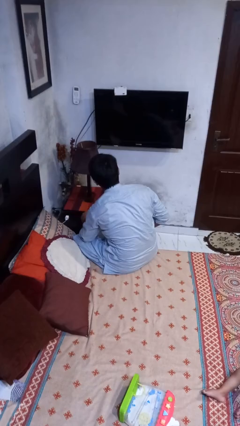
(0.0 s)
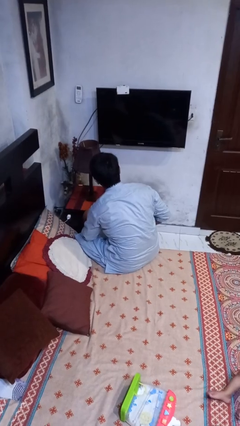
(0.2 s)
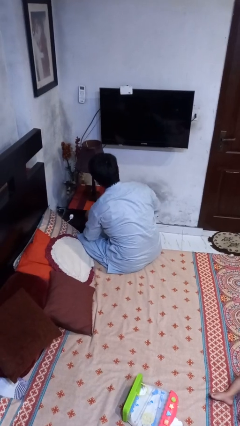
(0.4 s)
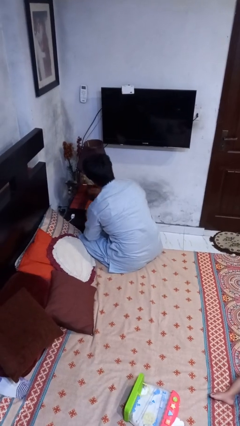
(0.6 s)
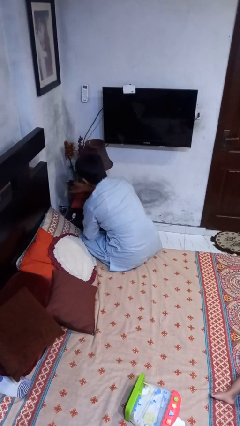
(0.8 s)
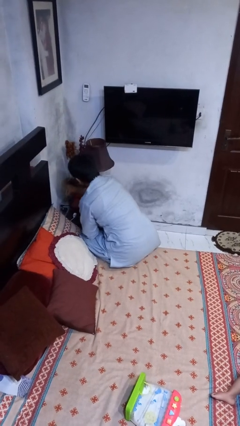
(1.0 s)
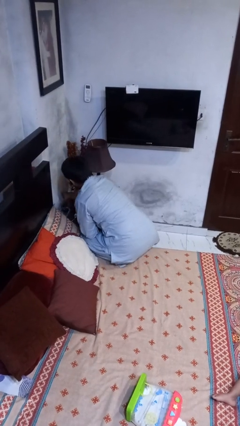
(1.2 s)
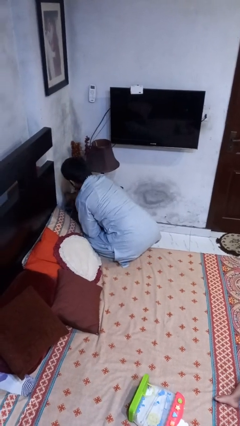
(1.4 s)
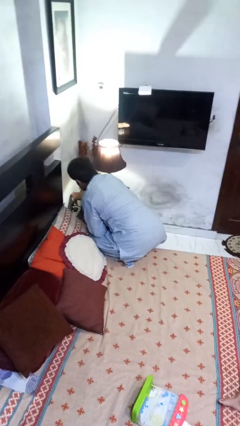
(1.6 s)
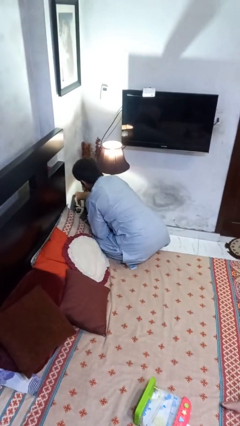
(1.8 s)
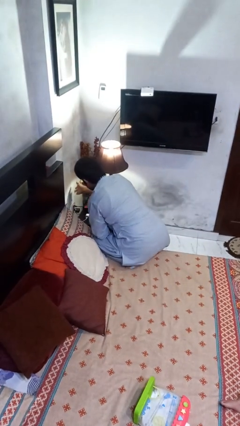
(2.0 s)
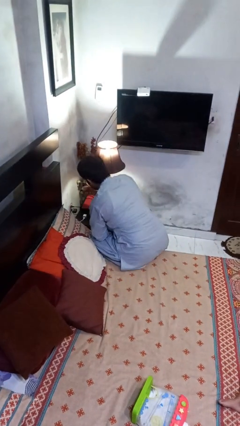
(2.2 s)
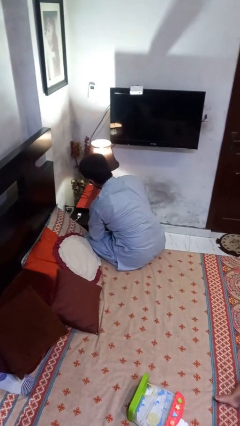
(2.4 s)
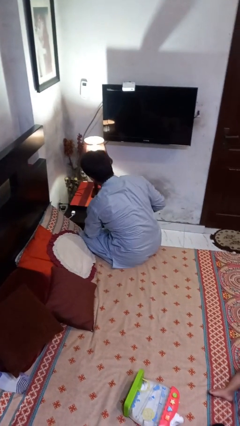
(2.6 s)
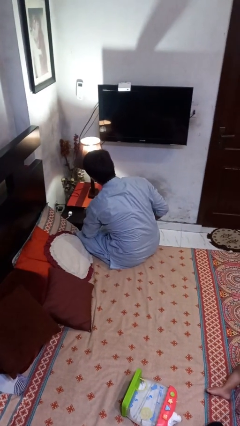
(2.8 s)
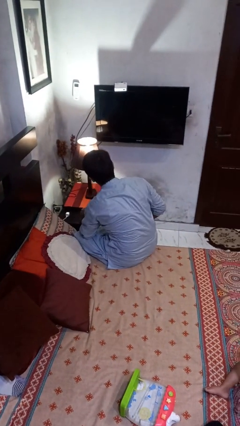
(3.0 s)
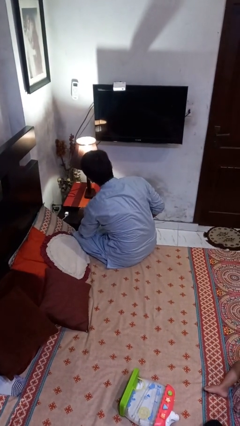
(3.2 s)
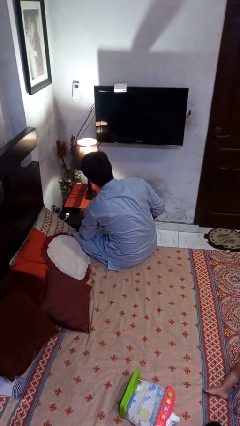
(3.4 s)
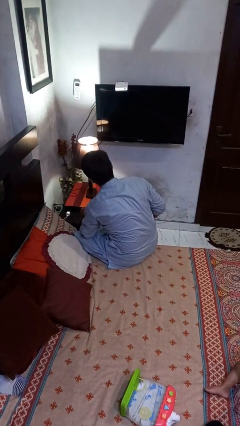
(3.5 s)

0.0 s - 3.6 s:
person turns on lamp

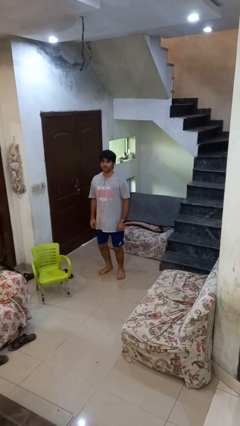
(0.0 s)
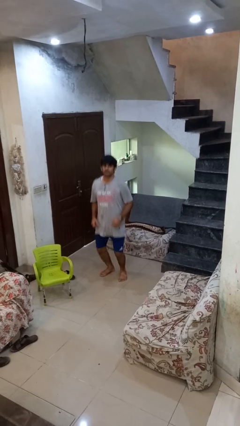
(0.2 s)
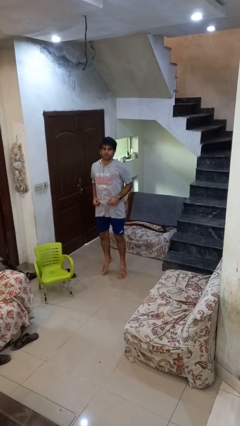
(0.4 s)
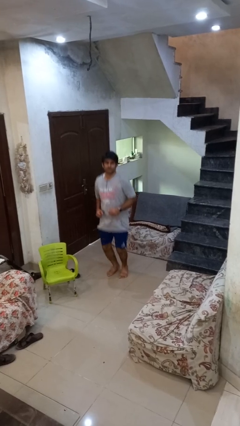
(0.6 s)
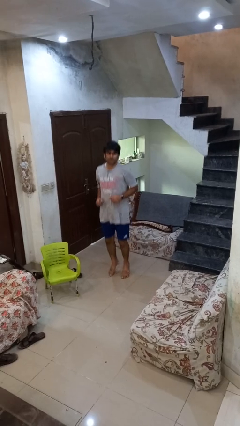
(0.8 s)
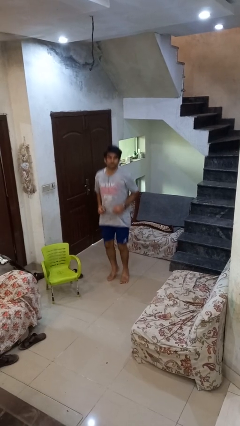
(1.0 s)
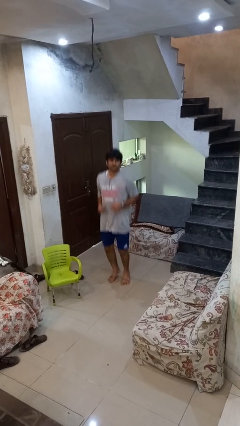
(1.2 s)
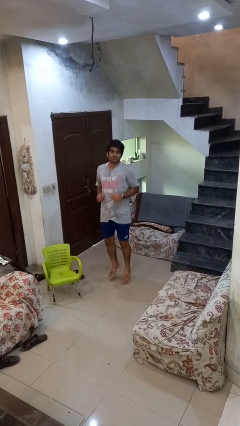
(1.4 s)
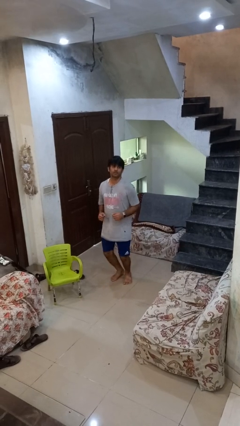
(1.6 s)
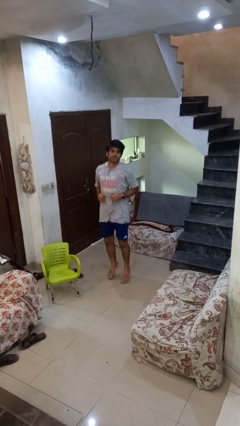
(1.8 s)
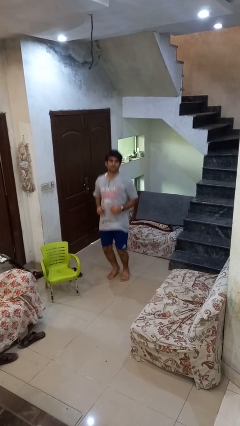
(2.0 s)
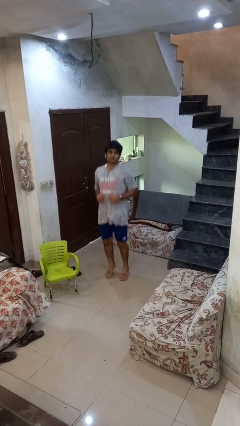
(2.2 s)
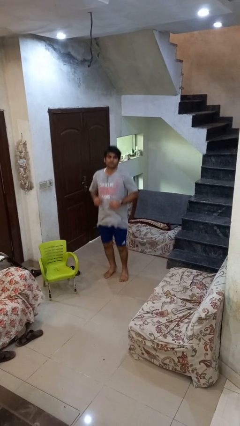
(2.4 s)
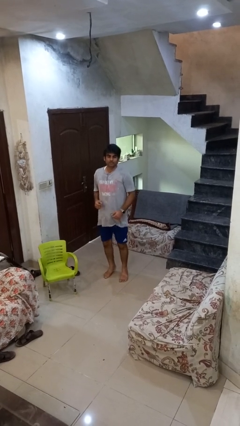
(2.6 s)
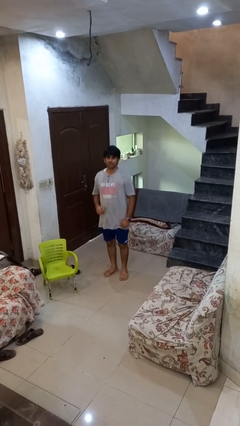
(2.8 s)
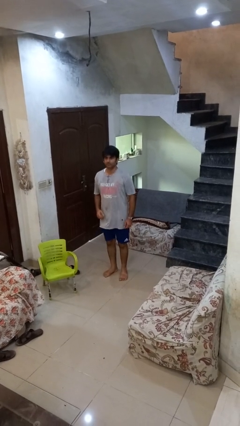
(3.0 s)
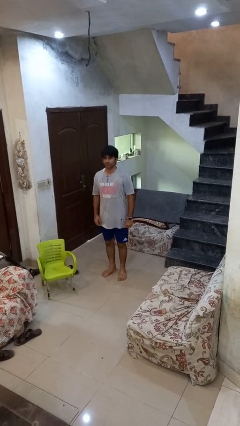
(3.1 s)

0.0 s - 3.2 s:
person jumps

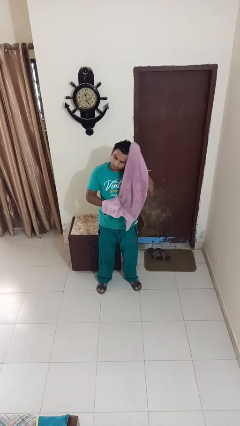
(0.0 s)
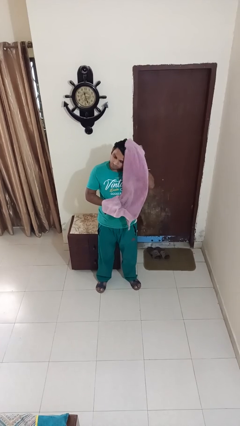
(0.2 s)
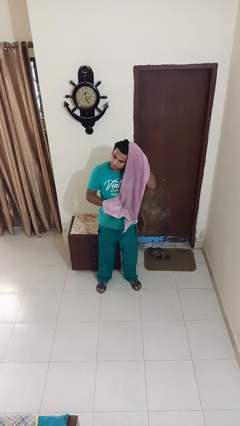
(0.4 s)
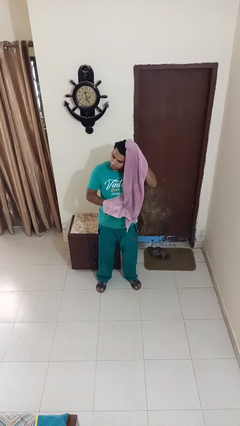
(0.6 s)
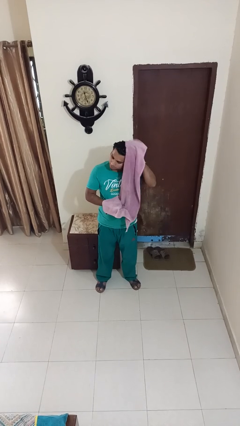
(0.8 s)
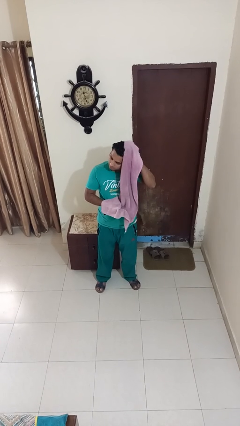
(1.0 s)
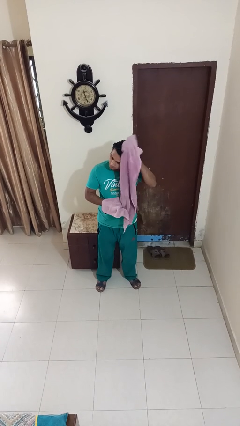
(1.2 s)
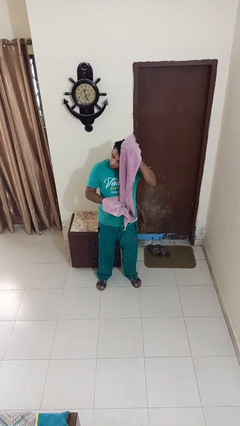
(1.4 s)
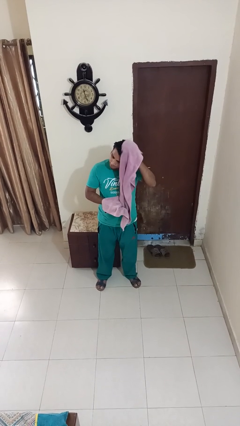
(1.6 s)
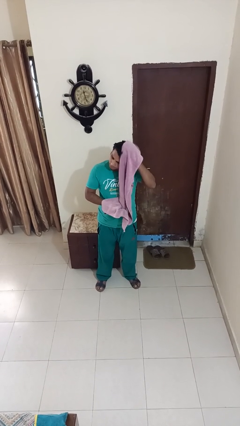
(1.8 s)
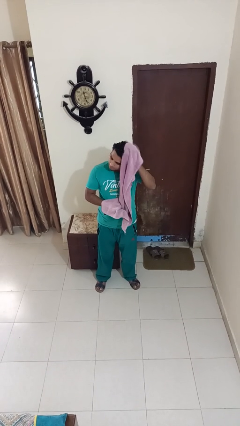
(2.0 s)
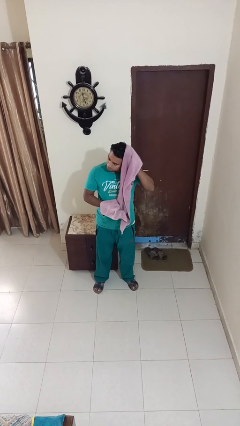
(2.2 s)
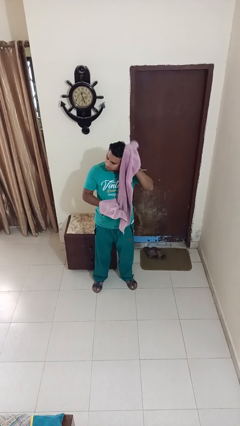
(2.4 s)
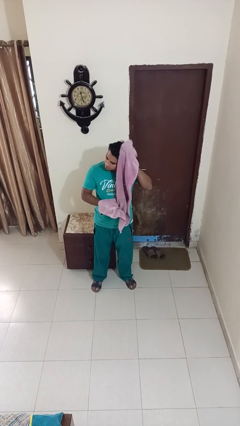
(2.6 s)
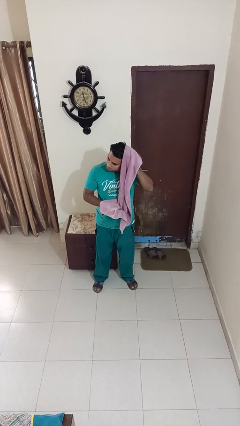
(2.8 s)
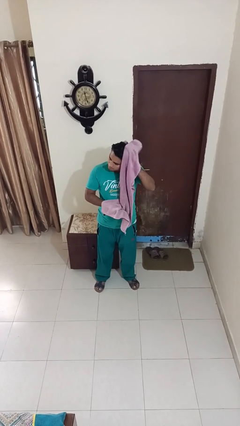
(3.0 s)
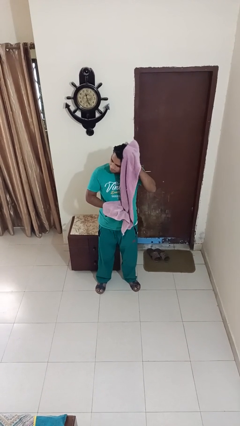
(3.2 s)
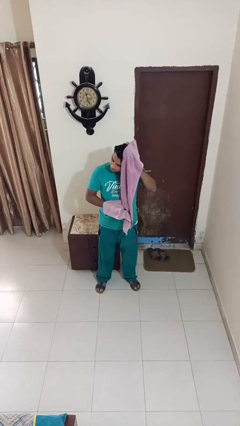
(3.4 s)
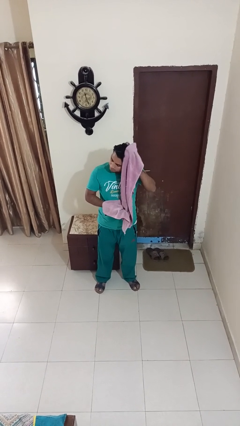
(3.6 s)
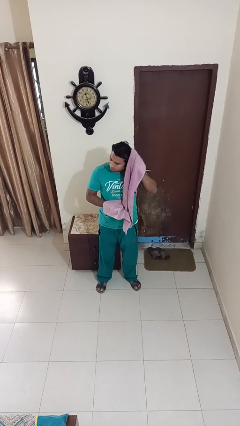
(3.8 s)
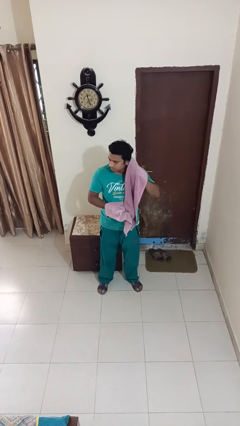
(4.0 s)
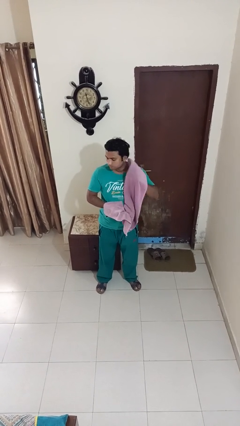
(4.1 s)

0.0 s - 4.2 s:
person dries hair with towel

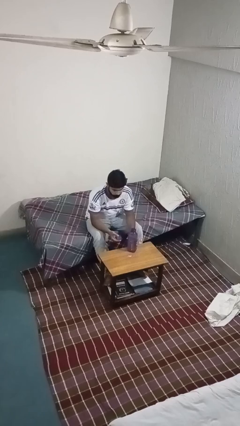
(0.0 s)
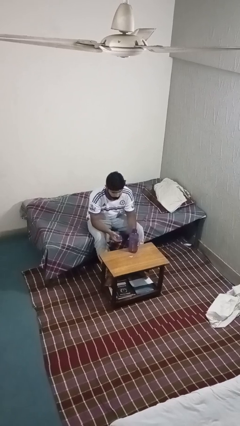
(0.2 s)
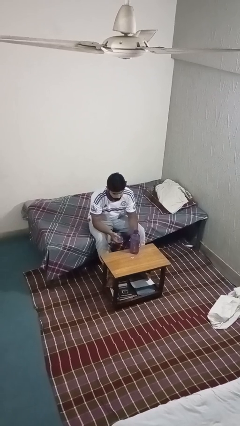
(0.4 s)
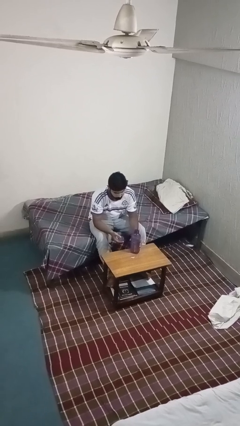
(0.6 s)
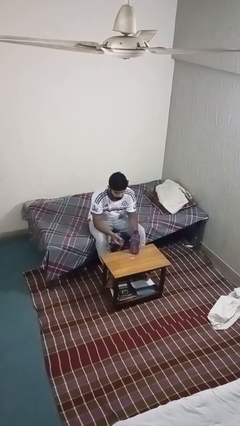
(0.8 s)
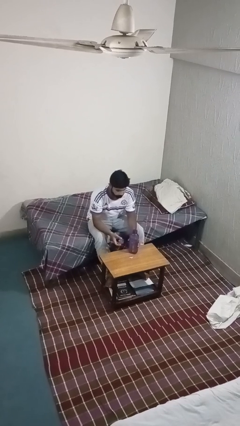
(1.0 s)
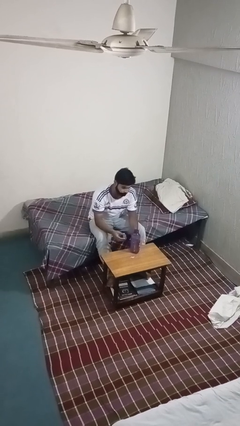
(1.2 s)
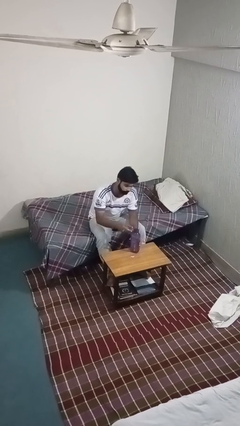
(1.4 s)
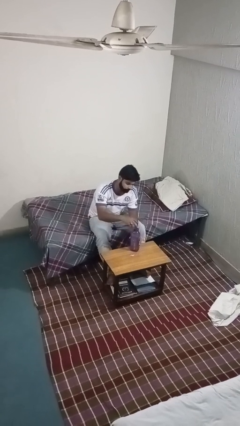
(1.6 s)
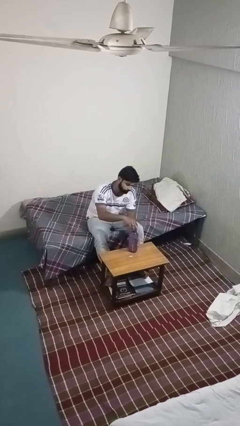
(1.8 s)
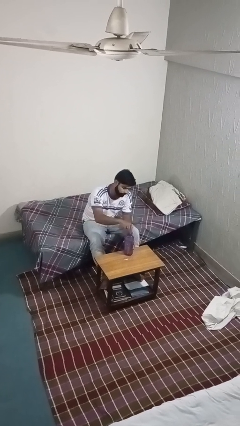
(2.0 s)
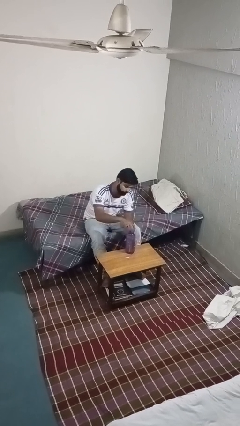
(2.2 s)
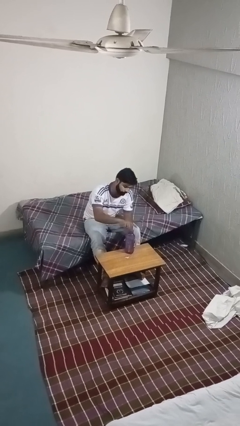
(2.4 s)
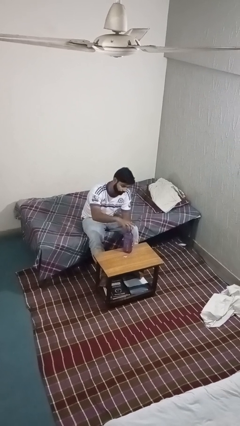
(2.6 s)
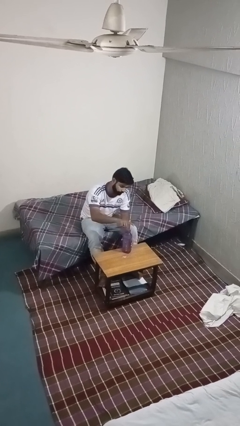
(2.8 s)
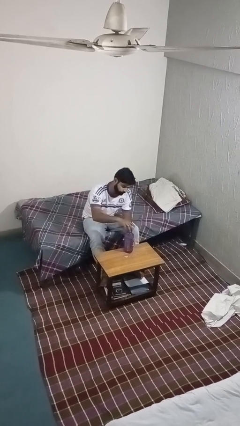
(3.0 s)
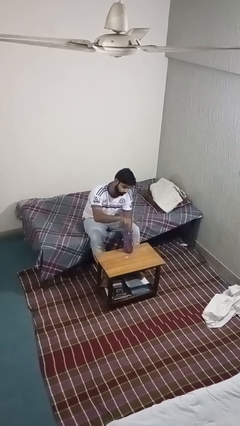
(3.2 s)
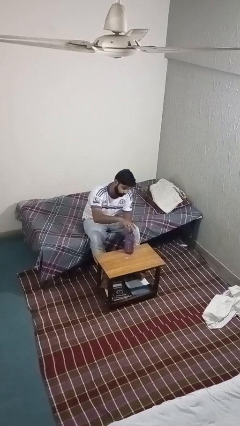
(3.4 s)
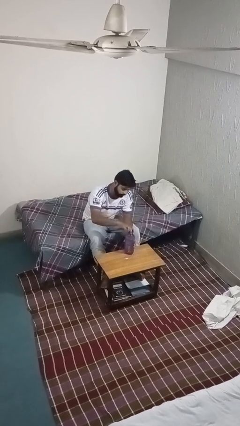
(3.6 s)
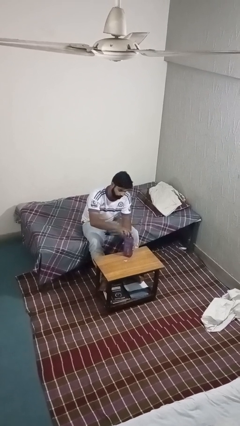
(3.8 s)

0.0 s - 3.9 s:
person screws lid to bottle

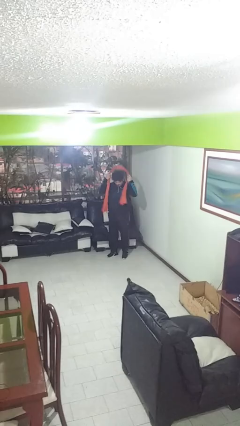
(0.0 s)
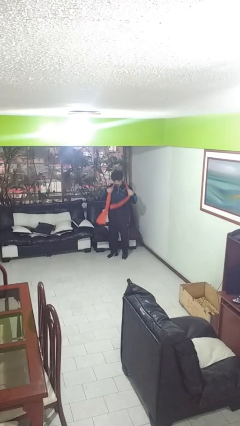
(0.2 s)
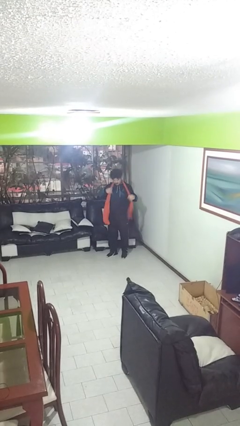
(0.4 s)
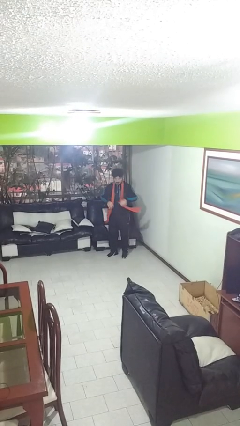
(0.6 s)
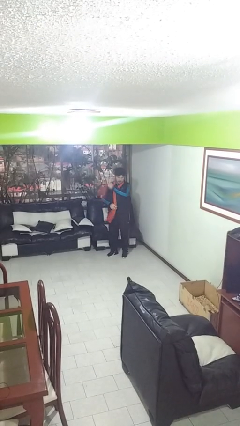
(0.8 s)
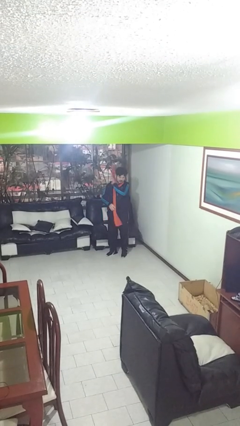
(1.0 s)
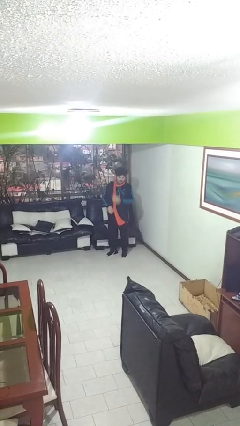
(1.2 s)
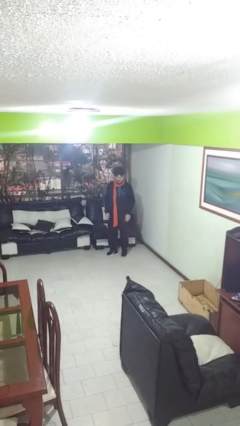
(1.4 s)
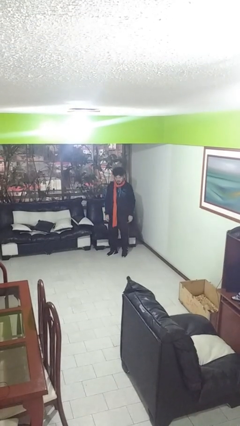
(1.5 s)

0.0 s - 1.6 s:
person puts on scarf

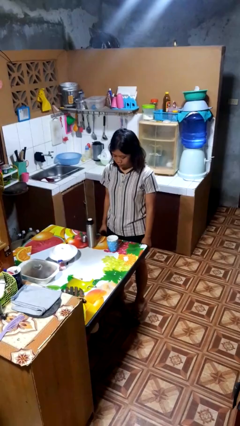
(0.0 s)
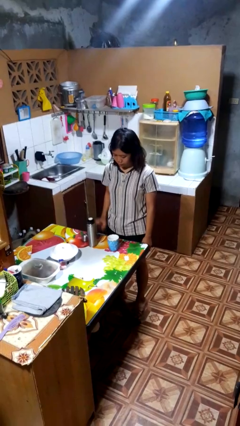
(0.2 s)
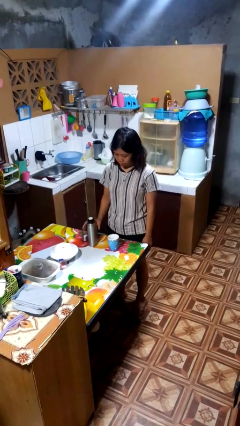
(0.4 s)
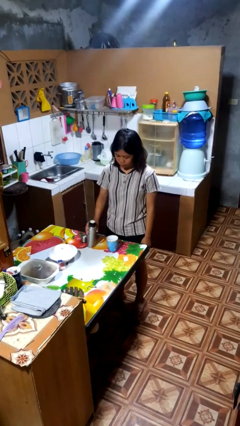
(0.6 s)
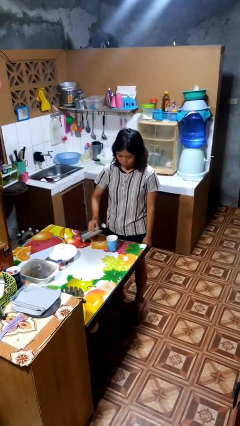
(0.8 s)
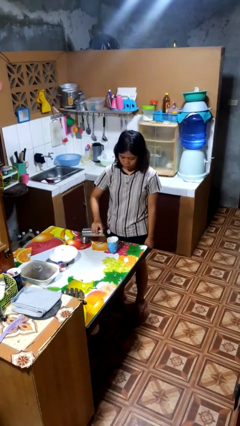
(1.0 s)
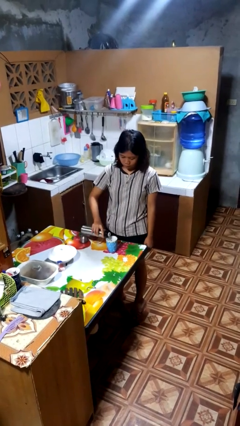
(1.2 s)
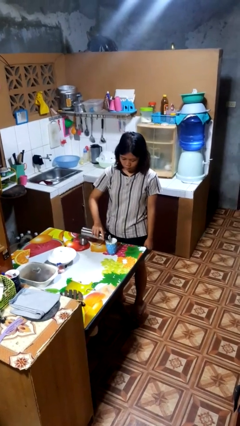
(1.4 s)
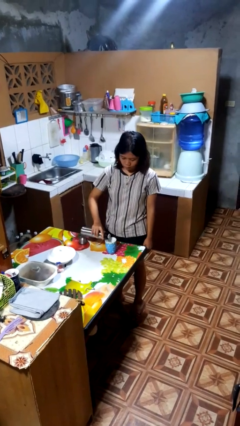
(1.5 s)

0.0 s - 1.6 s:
person pours coffee into mug
